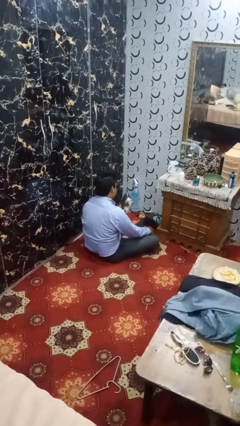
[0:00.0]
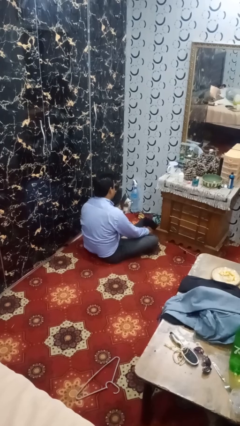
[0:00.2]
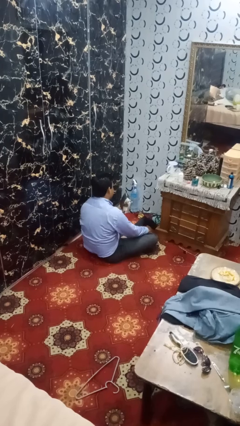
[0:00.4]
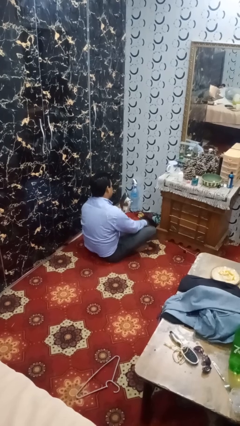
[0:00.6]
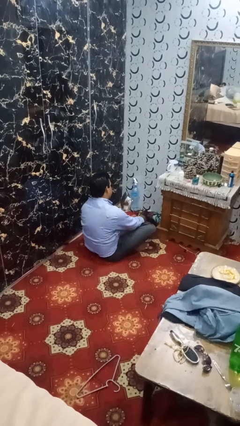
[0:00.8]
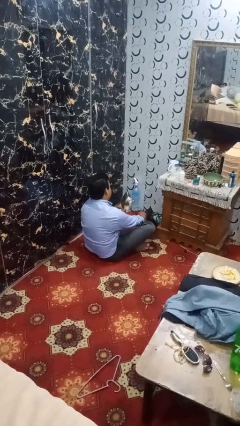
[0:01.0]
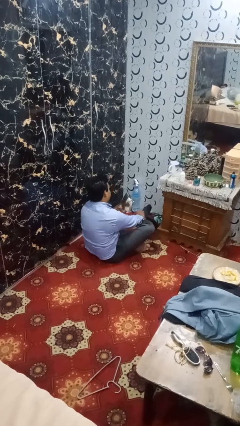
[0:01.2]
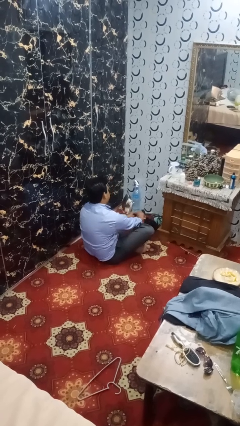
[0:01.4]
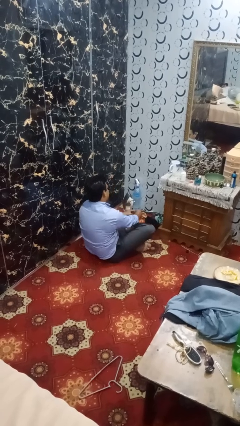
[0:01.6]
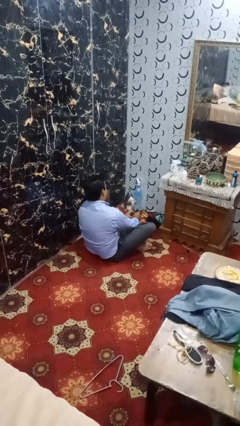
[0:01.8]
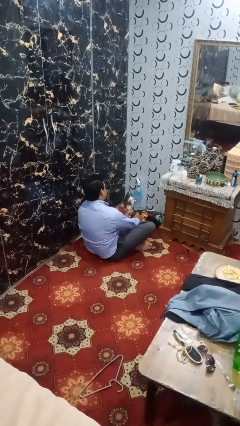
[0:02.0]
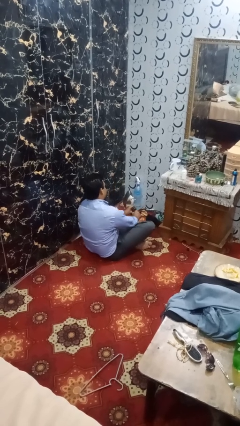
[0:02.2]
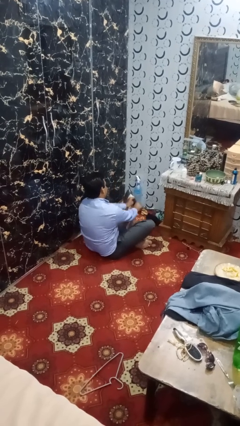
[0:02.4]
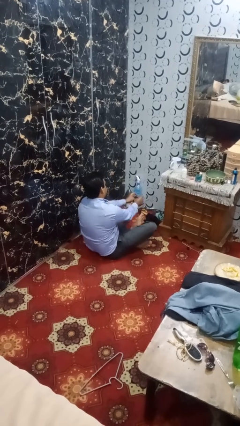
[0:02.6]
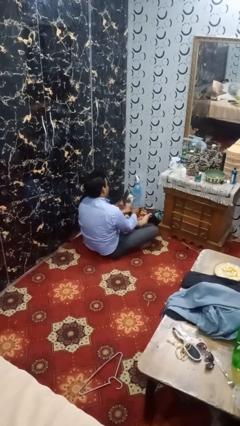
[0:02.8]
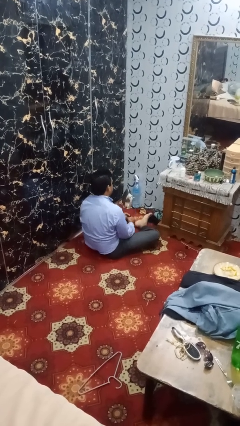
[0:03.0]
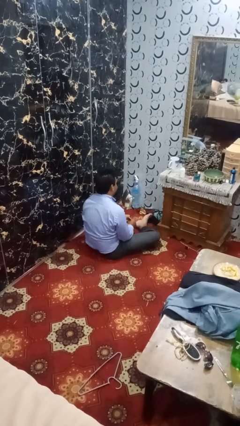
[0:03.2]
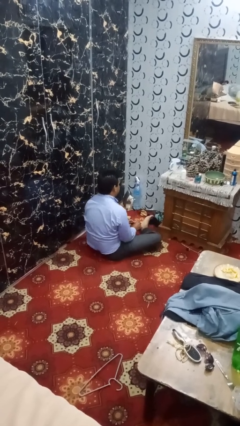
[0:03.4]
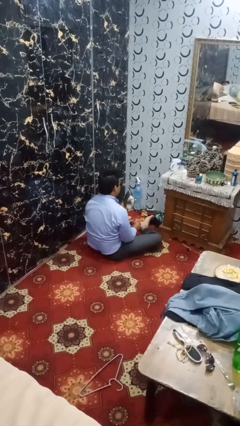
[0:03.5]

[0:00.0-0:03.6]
person takes off socks

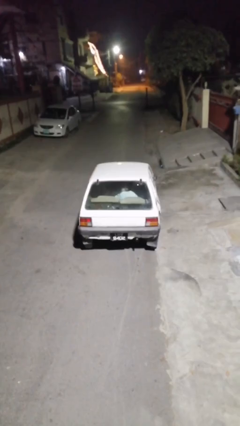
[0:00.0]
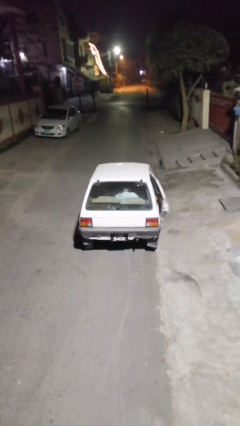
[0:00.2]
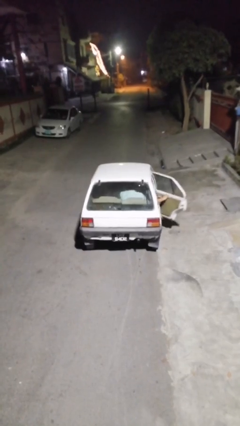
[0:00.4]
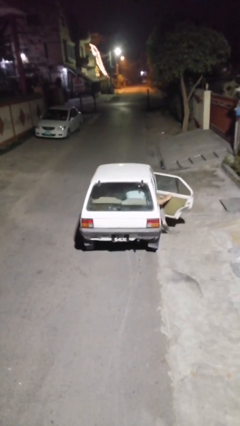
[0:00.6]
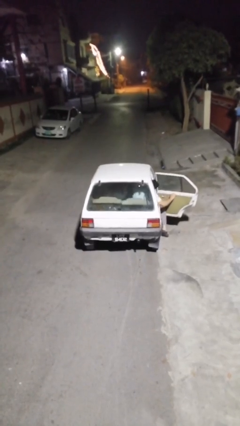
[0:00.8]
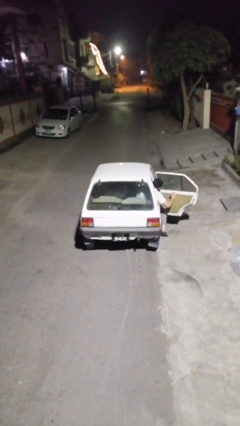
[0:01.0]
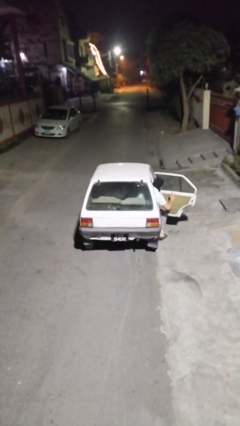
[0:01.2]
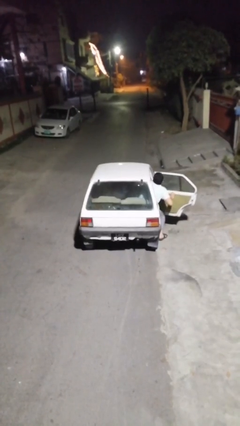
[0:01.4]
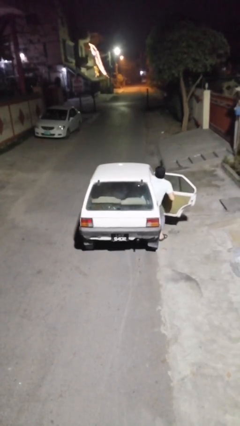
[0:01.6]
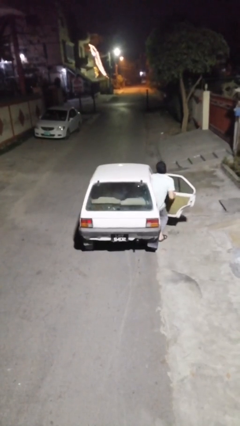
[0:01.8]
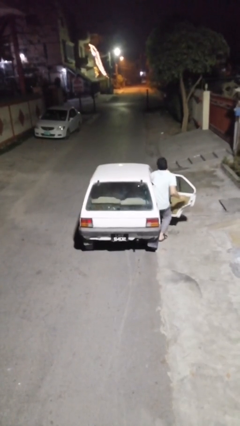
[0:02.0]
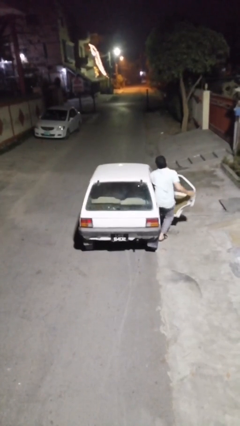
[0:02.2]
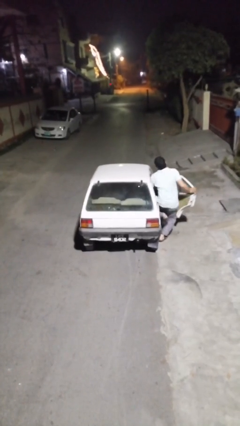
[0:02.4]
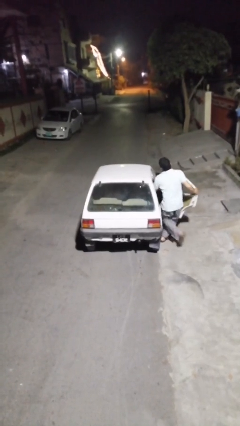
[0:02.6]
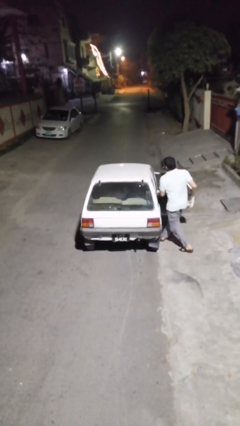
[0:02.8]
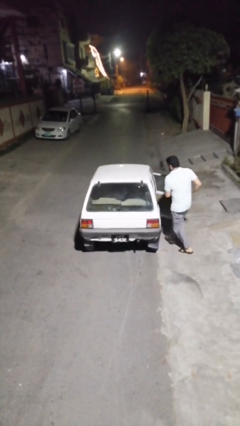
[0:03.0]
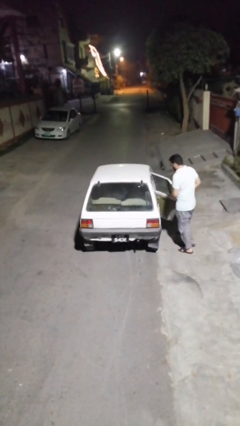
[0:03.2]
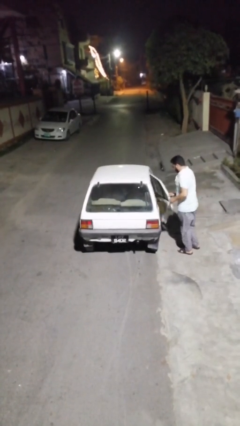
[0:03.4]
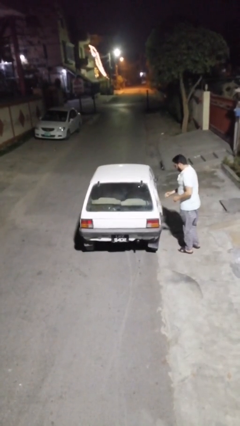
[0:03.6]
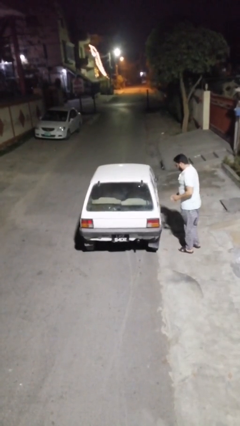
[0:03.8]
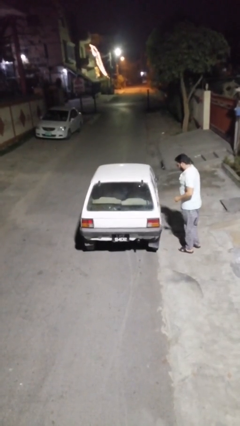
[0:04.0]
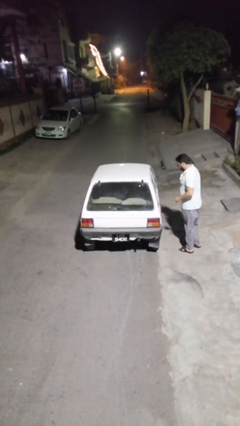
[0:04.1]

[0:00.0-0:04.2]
car drops off person

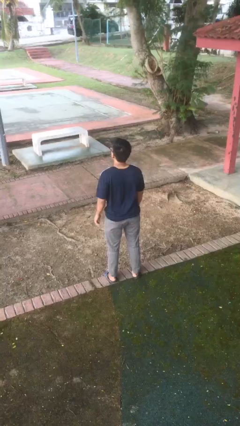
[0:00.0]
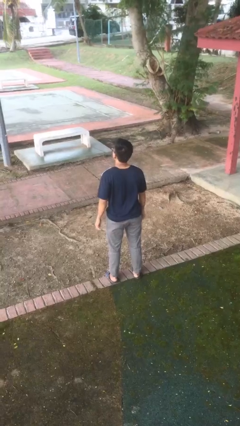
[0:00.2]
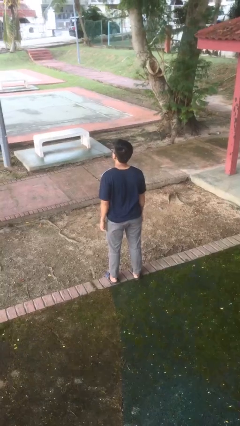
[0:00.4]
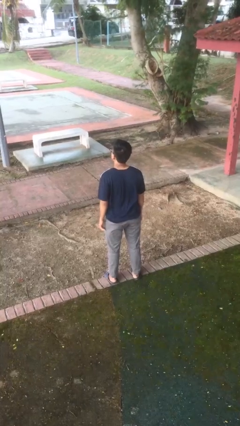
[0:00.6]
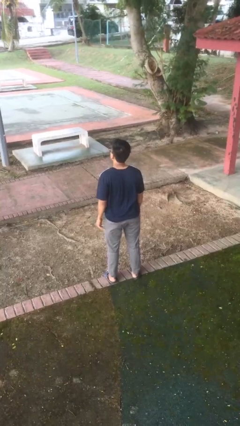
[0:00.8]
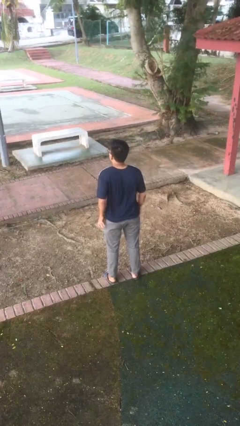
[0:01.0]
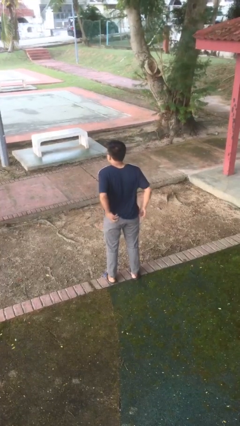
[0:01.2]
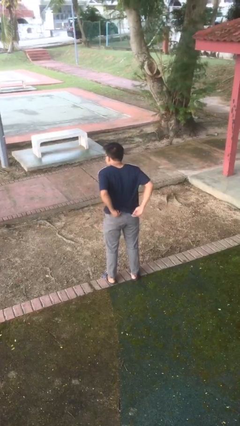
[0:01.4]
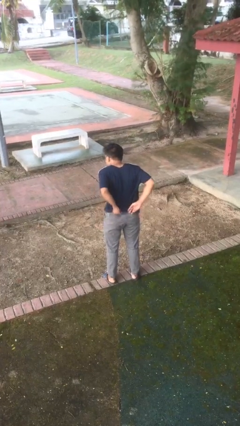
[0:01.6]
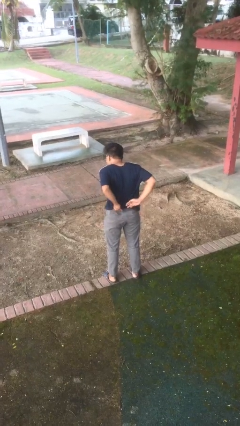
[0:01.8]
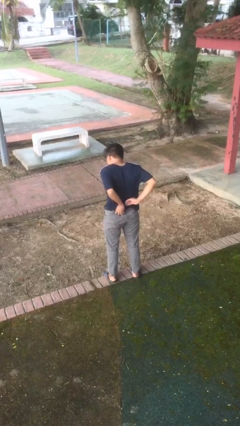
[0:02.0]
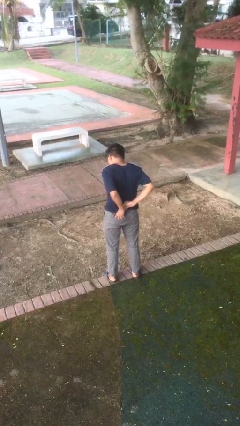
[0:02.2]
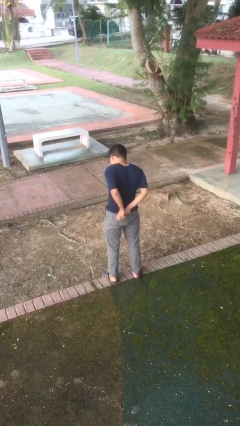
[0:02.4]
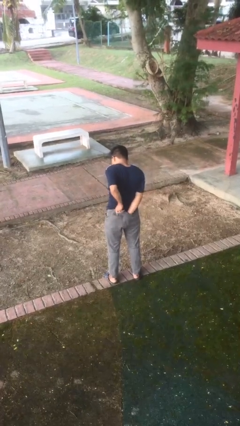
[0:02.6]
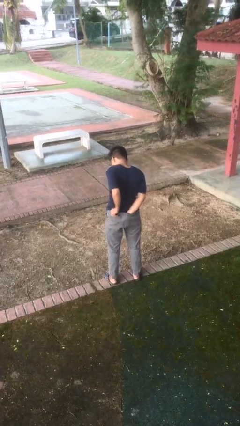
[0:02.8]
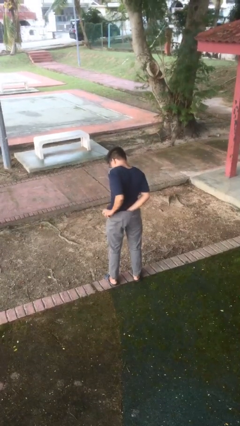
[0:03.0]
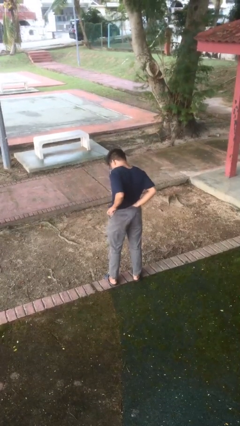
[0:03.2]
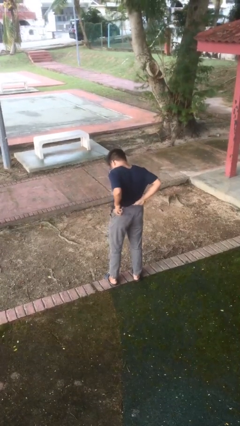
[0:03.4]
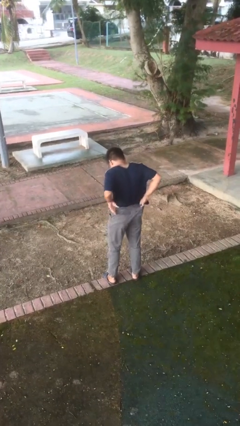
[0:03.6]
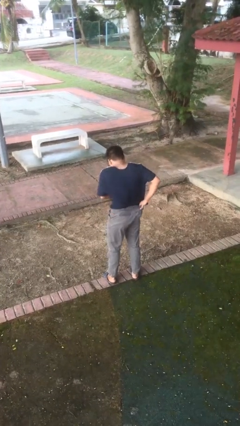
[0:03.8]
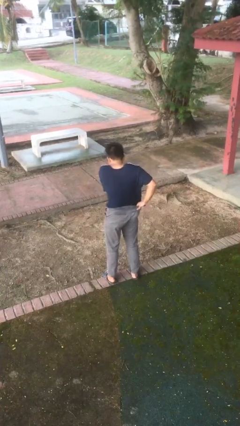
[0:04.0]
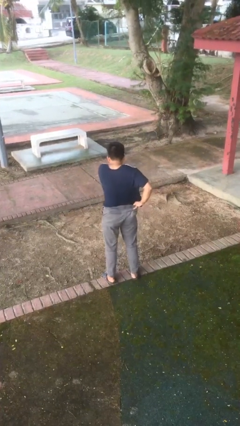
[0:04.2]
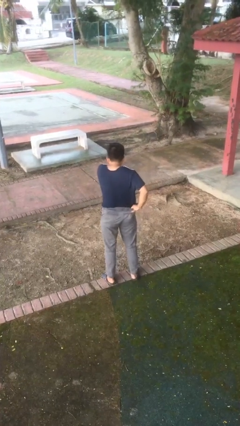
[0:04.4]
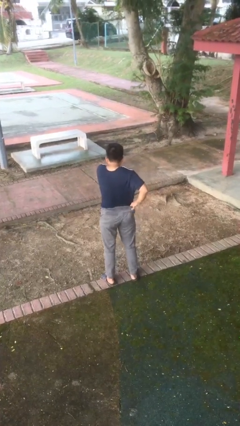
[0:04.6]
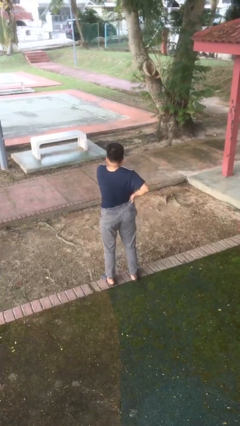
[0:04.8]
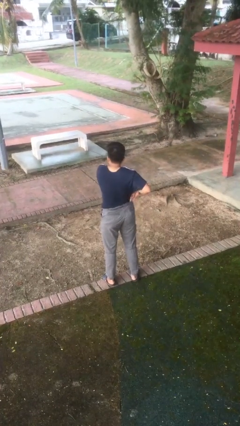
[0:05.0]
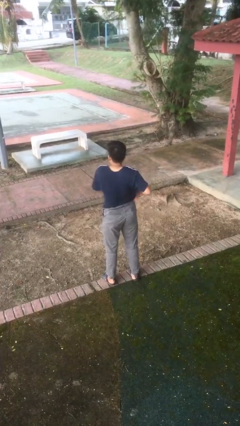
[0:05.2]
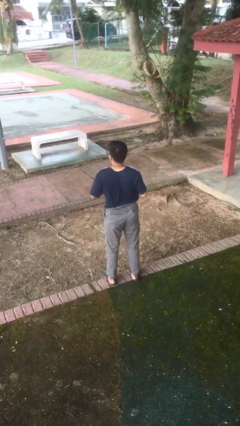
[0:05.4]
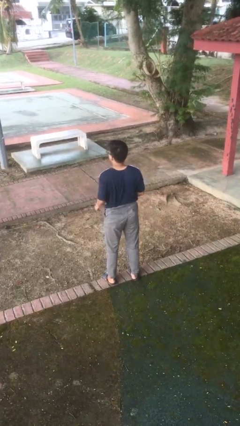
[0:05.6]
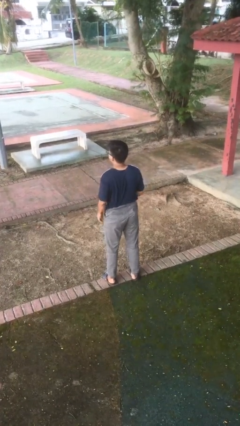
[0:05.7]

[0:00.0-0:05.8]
person tucks in shirt

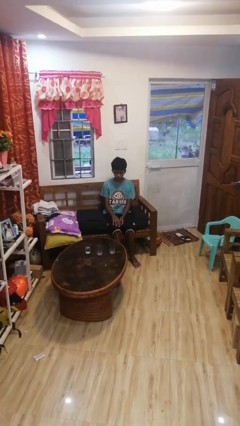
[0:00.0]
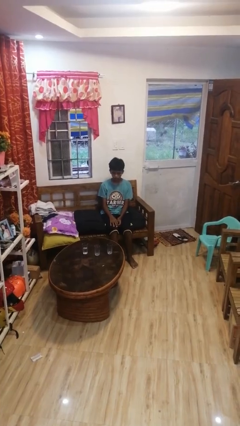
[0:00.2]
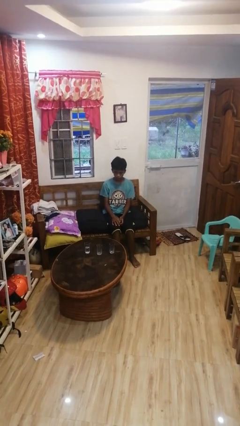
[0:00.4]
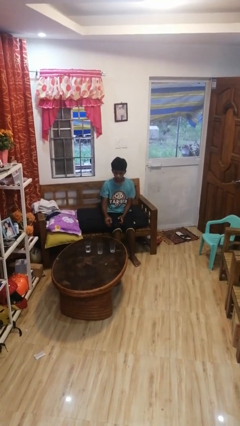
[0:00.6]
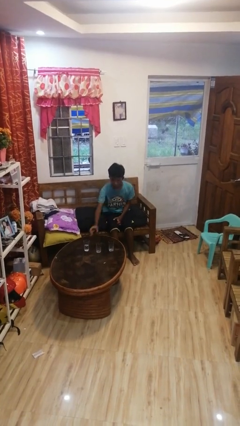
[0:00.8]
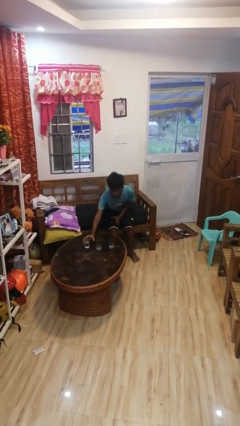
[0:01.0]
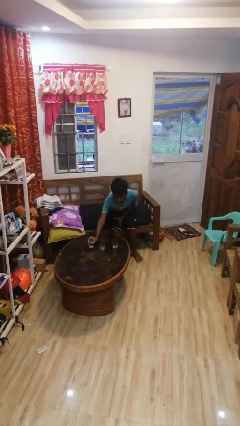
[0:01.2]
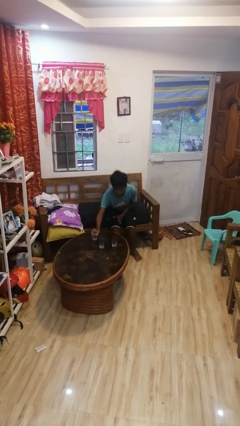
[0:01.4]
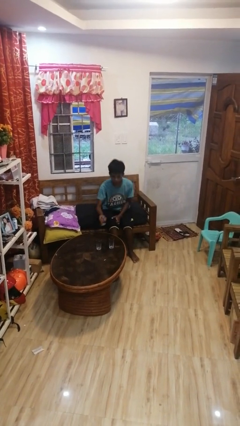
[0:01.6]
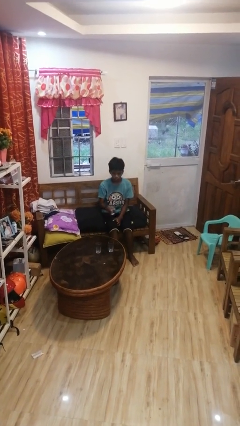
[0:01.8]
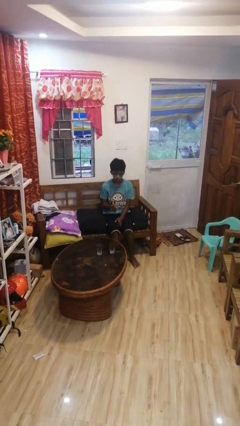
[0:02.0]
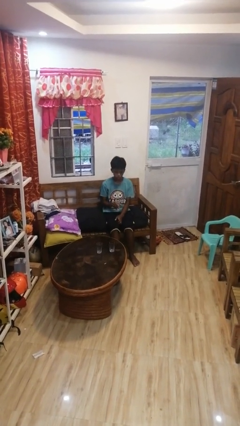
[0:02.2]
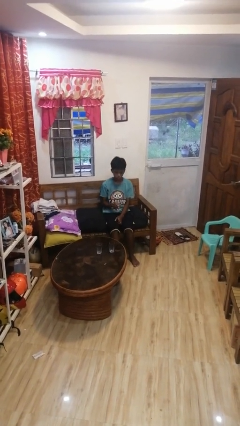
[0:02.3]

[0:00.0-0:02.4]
person picks up object from table

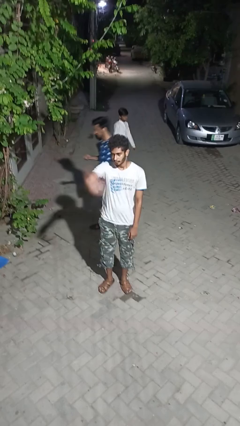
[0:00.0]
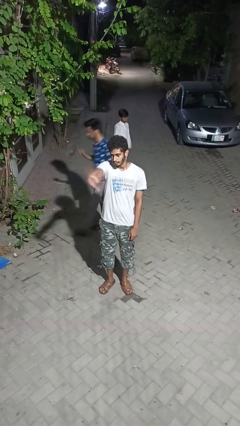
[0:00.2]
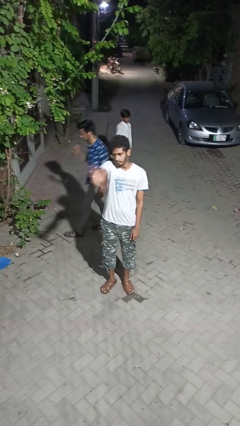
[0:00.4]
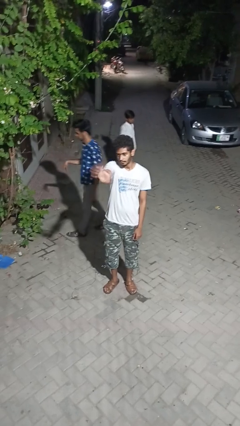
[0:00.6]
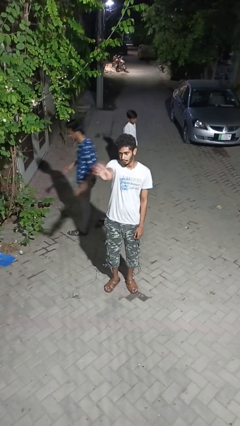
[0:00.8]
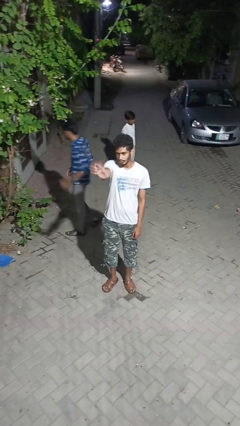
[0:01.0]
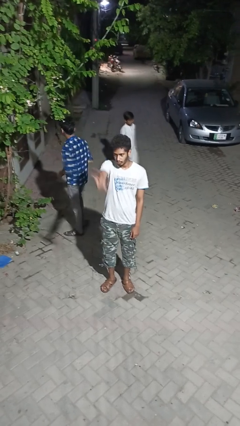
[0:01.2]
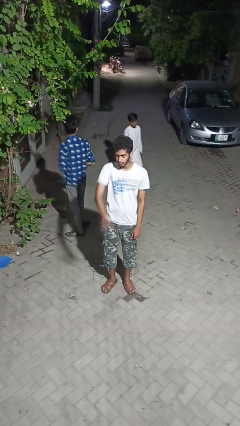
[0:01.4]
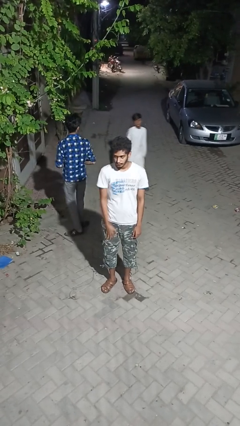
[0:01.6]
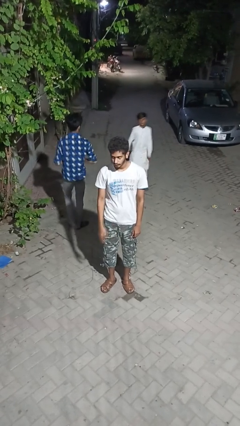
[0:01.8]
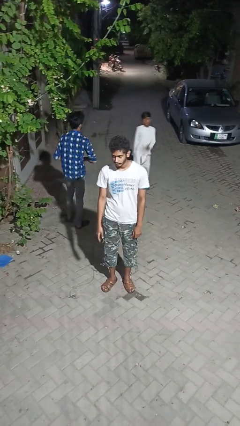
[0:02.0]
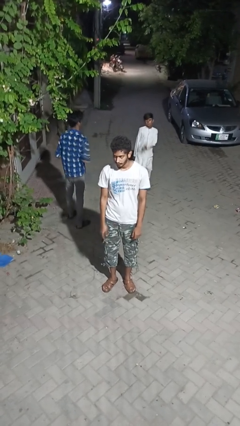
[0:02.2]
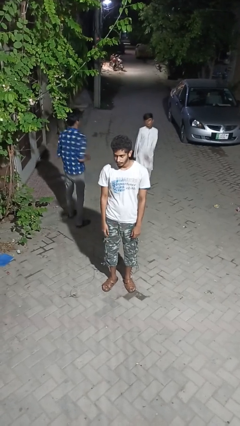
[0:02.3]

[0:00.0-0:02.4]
person waves at person
